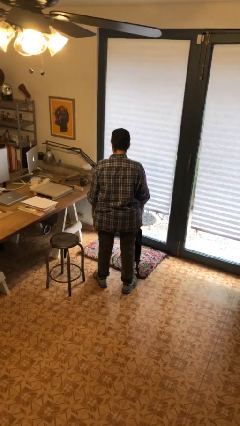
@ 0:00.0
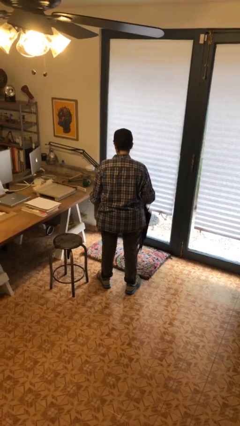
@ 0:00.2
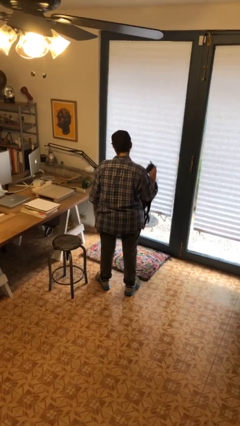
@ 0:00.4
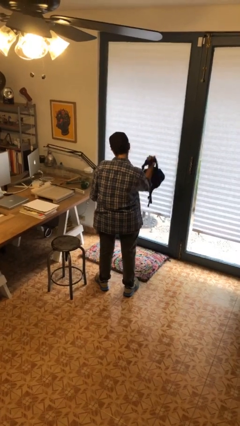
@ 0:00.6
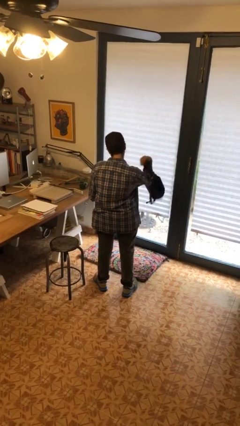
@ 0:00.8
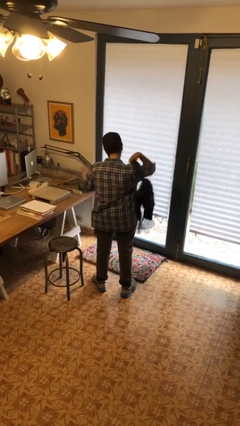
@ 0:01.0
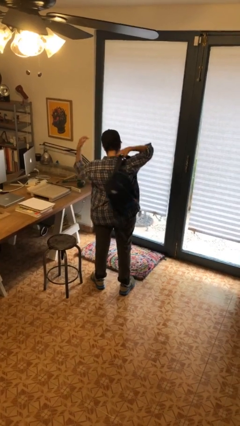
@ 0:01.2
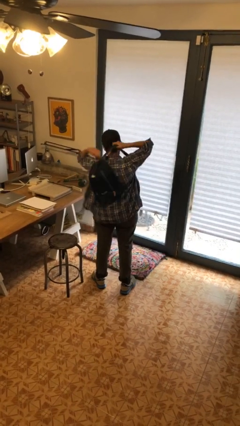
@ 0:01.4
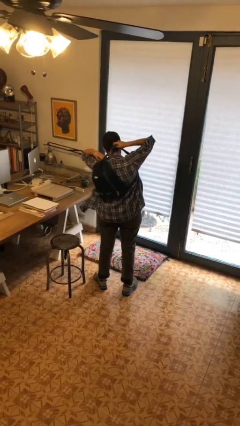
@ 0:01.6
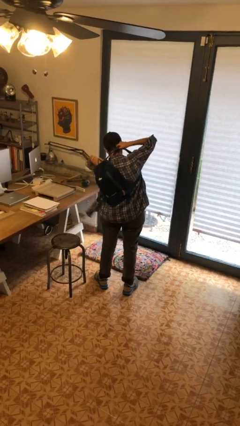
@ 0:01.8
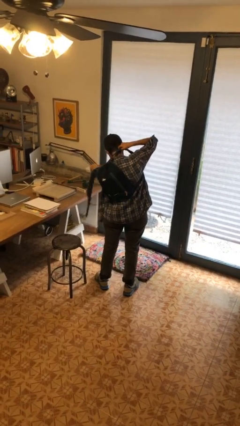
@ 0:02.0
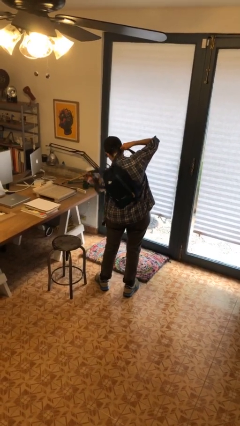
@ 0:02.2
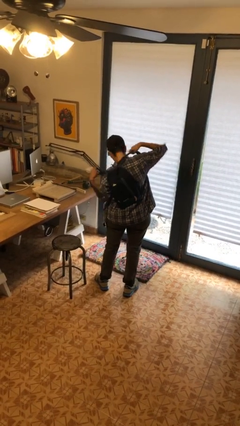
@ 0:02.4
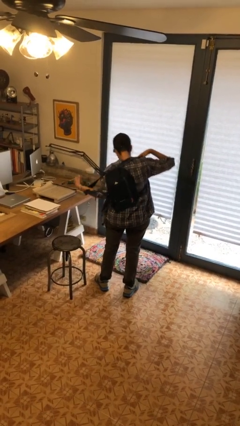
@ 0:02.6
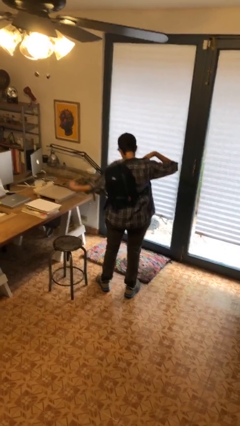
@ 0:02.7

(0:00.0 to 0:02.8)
person puts on backpack

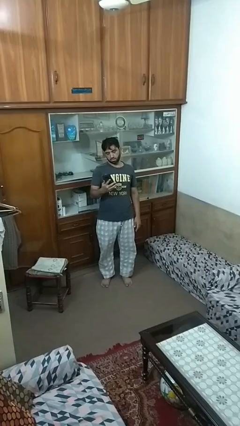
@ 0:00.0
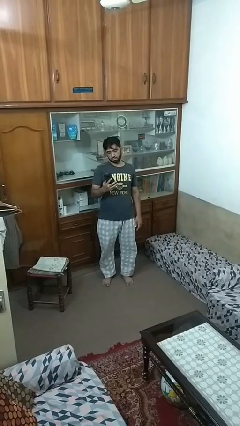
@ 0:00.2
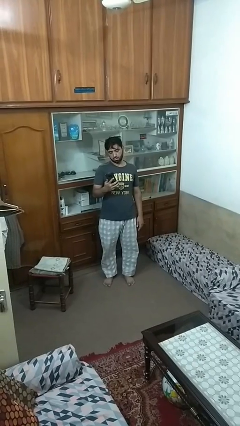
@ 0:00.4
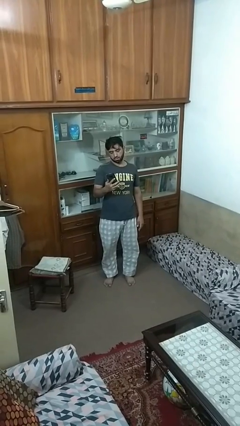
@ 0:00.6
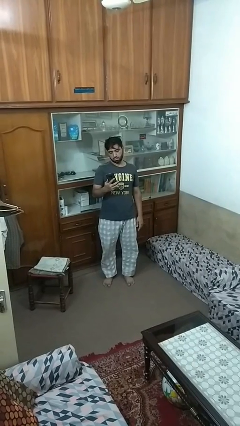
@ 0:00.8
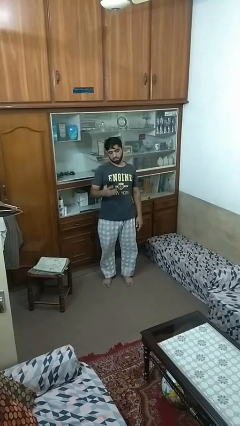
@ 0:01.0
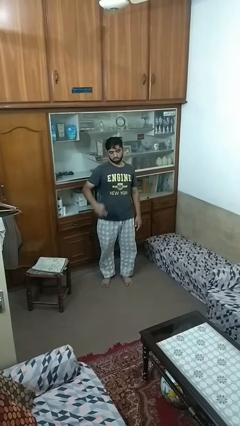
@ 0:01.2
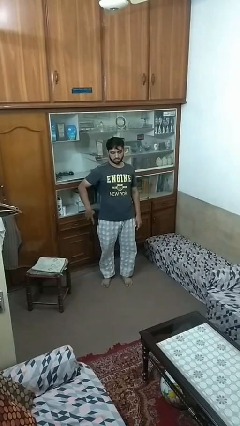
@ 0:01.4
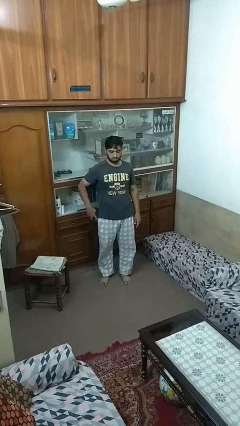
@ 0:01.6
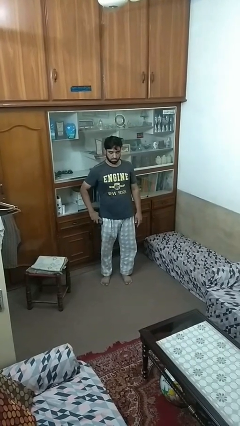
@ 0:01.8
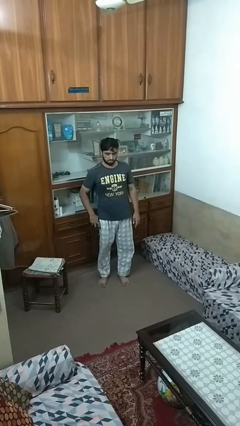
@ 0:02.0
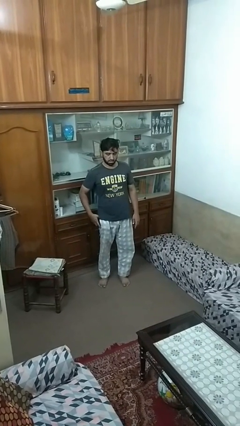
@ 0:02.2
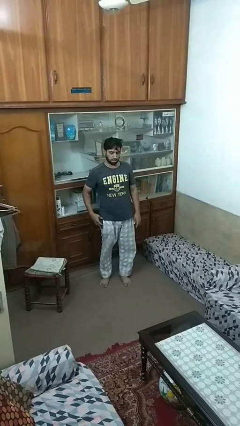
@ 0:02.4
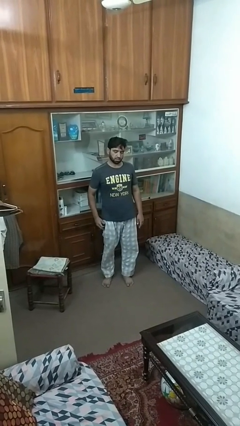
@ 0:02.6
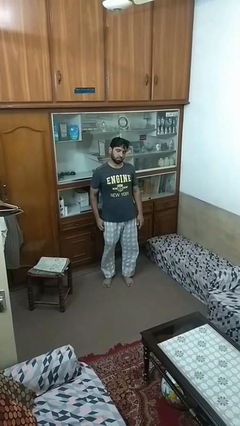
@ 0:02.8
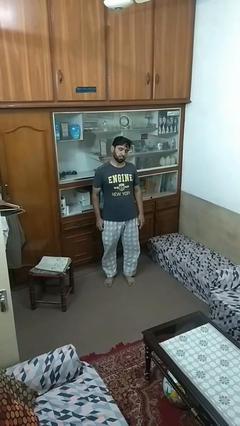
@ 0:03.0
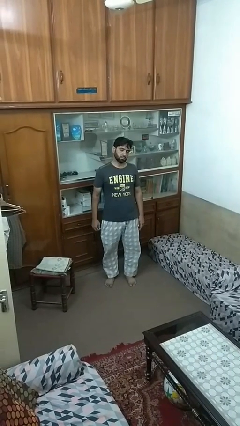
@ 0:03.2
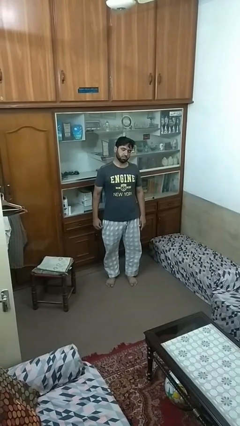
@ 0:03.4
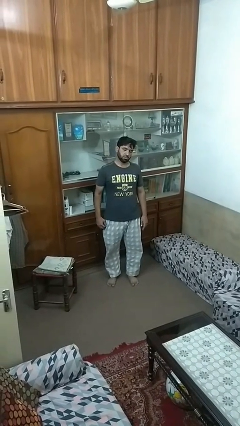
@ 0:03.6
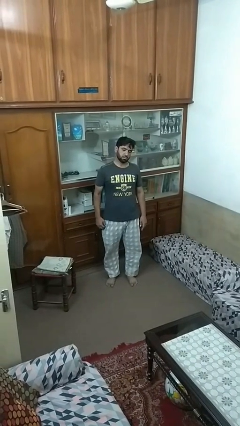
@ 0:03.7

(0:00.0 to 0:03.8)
person puts phone into pocket

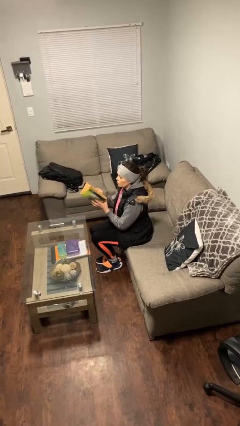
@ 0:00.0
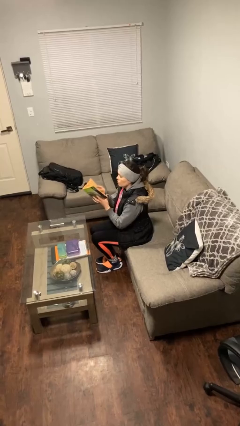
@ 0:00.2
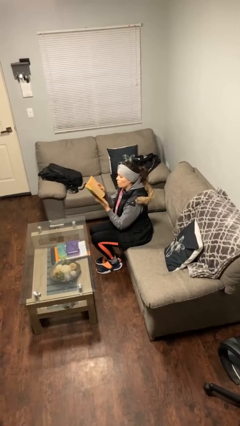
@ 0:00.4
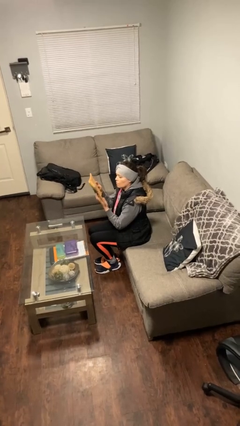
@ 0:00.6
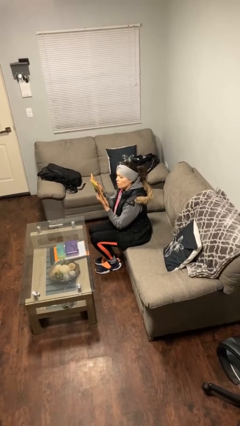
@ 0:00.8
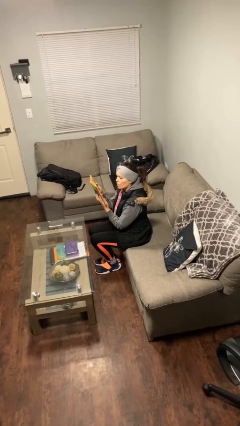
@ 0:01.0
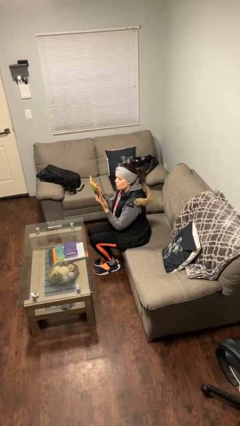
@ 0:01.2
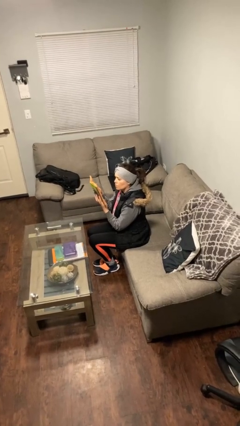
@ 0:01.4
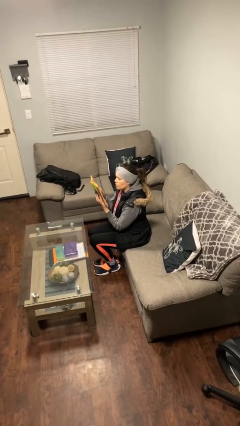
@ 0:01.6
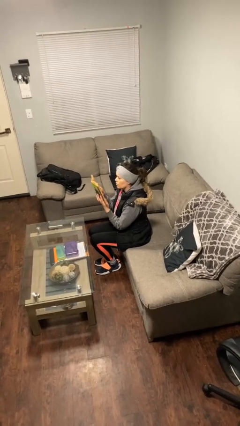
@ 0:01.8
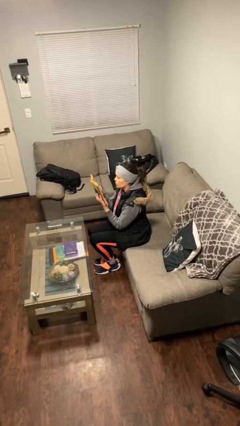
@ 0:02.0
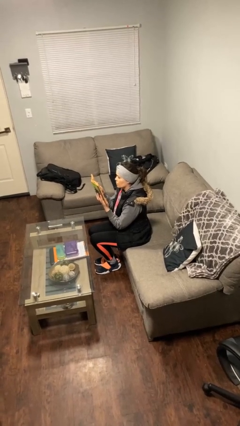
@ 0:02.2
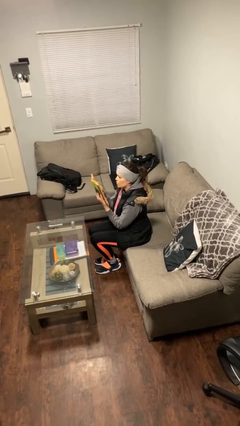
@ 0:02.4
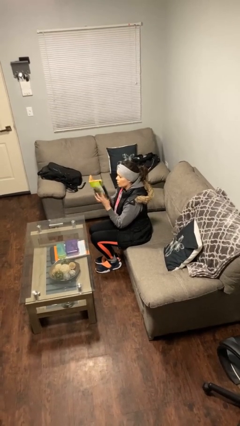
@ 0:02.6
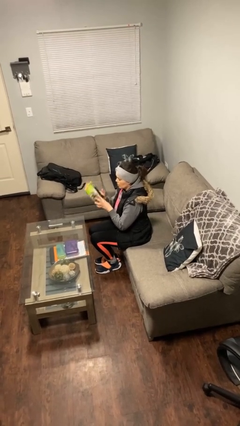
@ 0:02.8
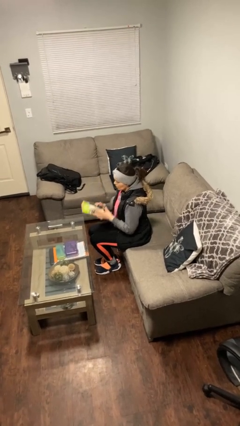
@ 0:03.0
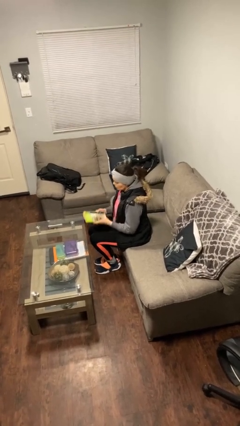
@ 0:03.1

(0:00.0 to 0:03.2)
person reads document

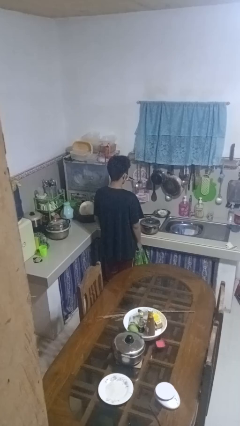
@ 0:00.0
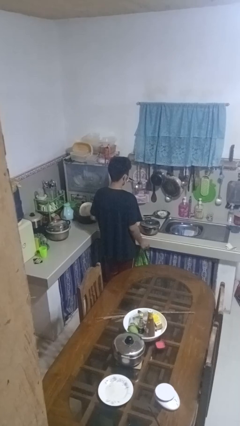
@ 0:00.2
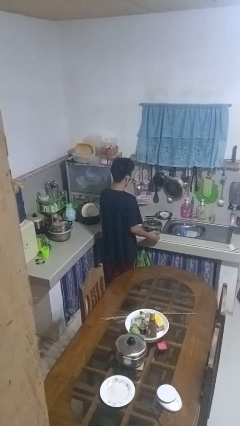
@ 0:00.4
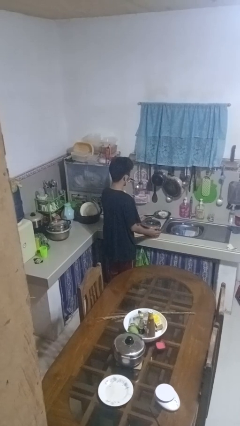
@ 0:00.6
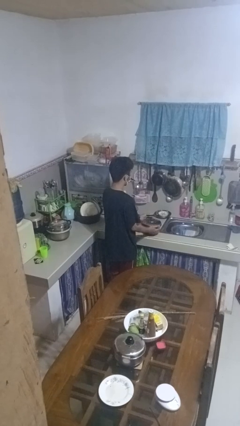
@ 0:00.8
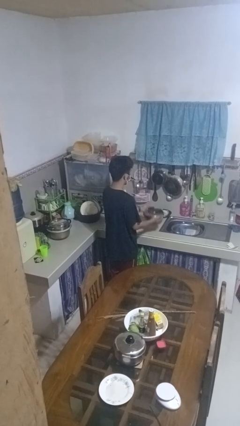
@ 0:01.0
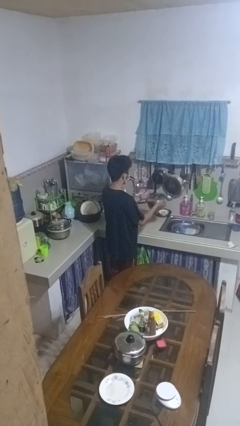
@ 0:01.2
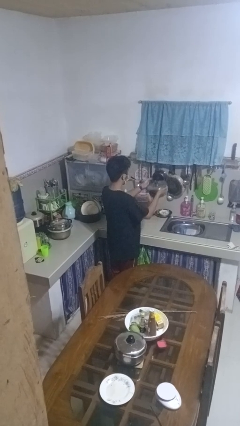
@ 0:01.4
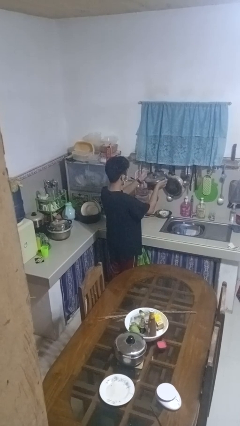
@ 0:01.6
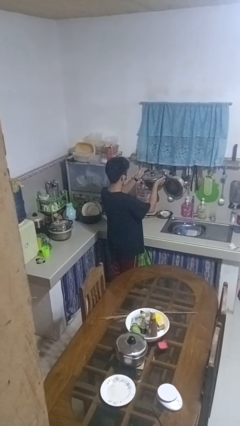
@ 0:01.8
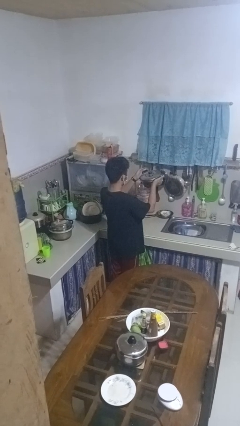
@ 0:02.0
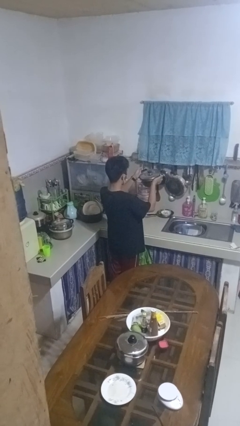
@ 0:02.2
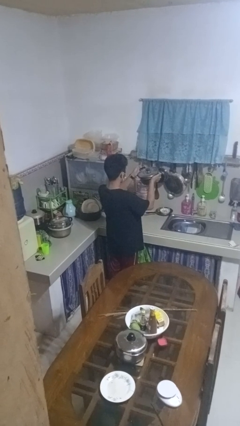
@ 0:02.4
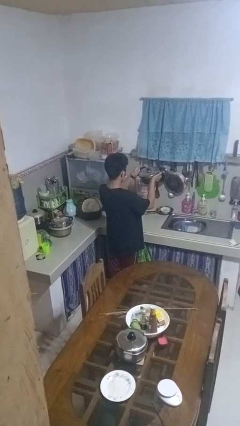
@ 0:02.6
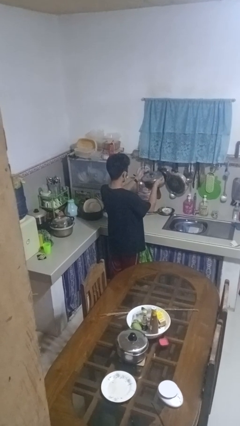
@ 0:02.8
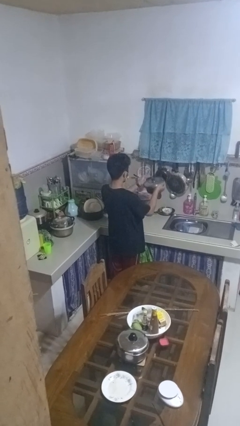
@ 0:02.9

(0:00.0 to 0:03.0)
person picks up object from countertop

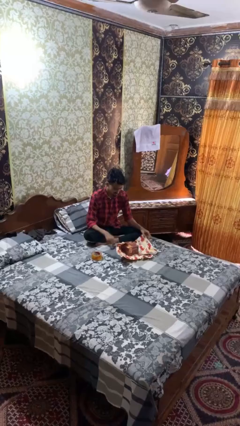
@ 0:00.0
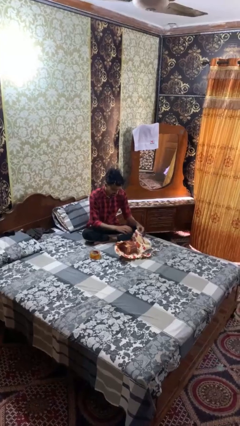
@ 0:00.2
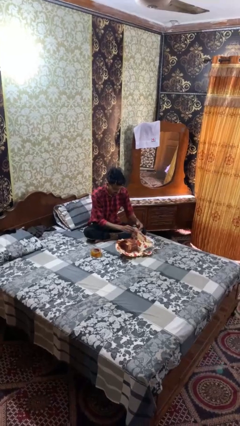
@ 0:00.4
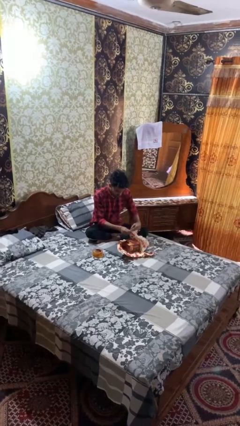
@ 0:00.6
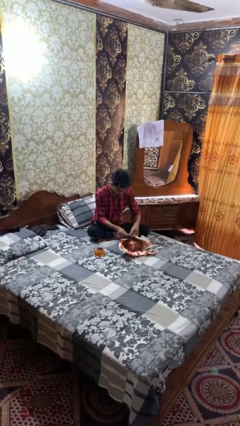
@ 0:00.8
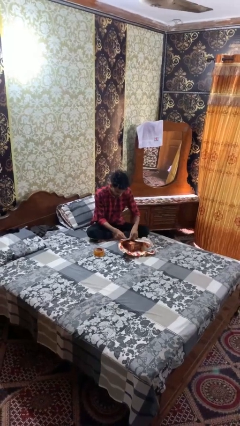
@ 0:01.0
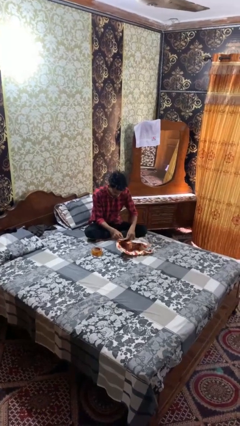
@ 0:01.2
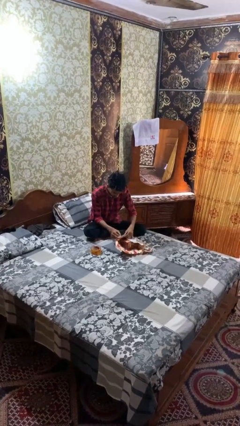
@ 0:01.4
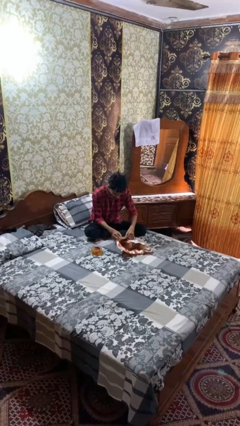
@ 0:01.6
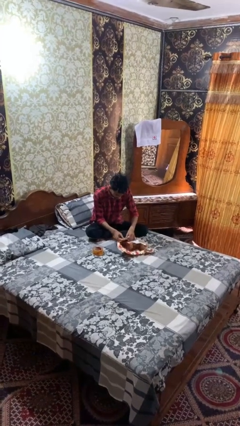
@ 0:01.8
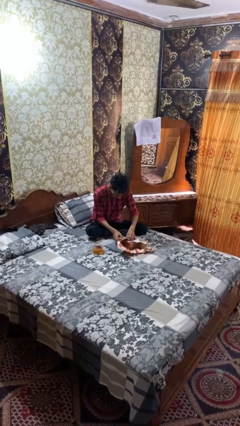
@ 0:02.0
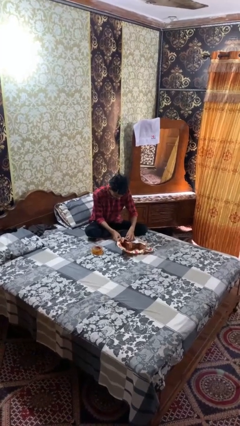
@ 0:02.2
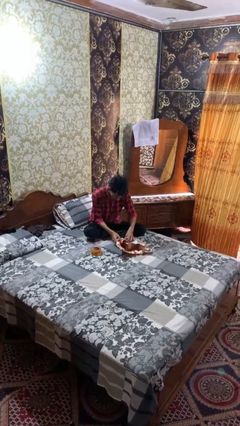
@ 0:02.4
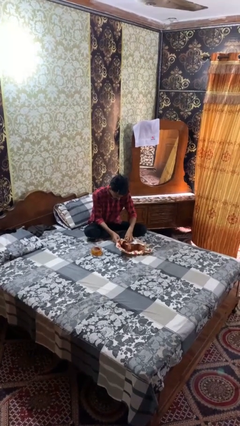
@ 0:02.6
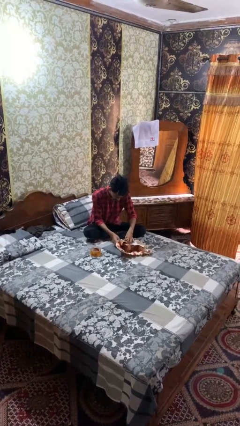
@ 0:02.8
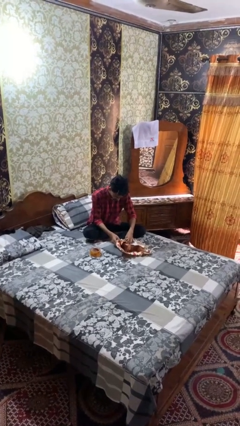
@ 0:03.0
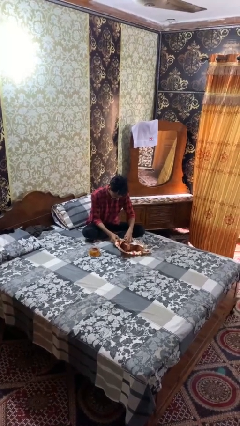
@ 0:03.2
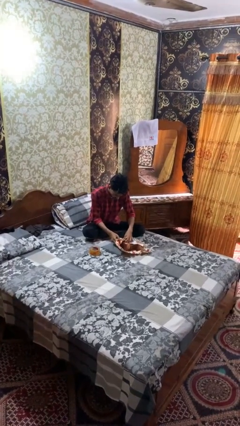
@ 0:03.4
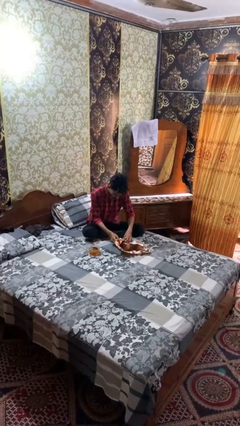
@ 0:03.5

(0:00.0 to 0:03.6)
person wraps box

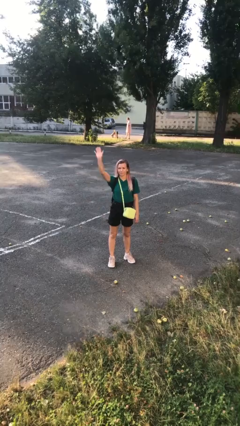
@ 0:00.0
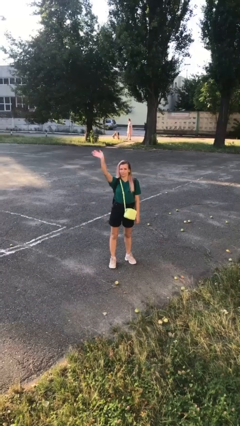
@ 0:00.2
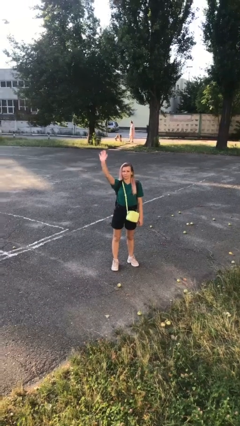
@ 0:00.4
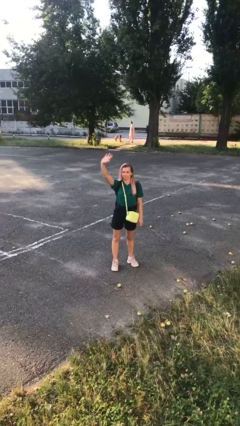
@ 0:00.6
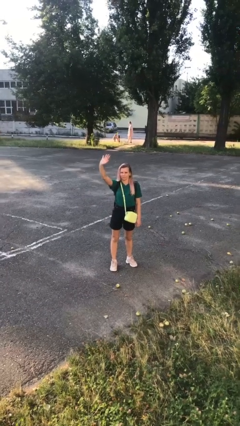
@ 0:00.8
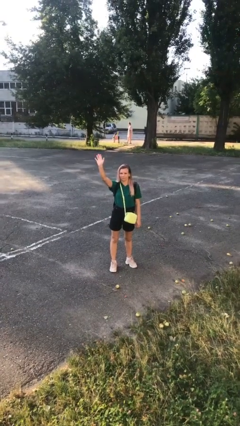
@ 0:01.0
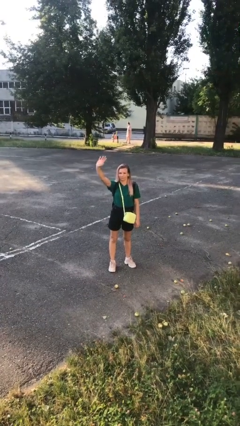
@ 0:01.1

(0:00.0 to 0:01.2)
person waves at person
